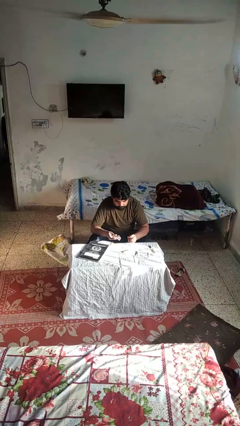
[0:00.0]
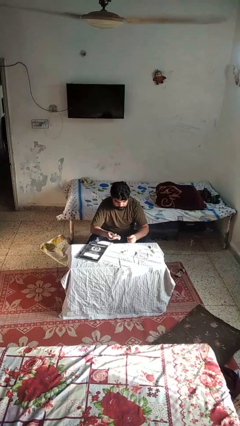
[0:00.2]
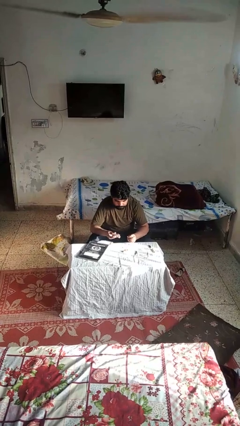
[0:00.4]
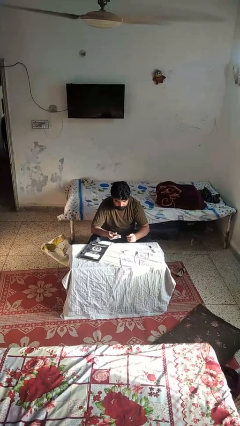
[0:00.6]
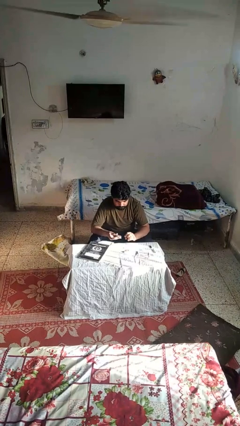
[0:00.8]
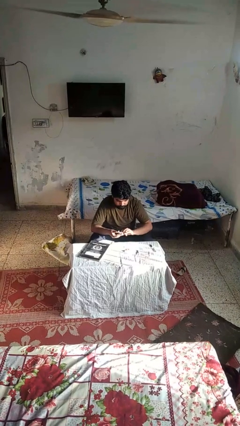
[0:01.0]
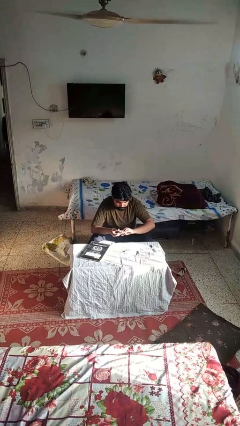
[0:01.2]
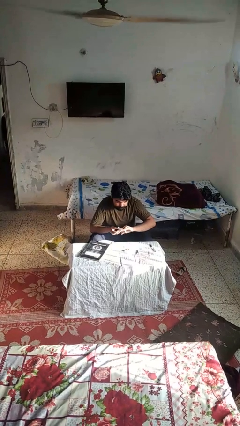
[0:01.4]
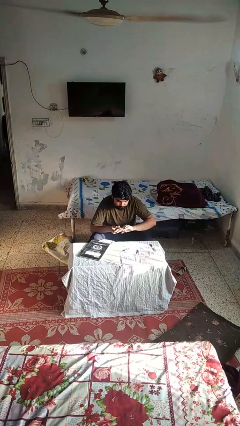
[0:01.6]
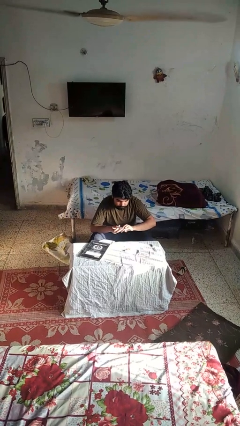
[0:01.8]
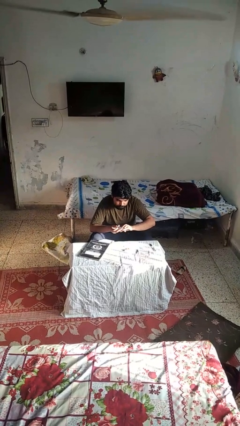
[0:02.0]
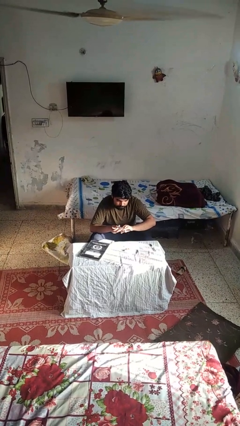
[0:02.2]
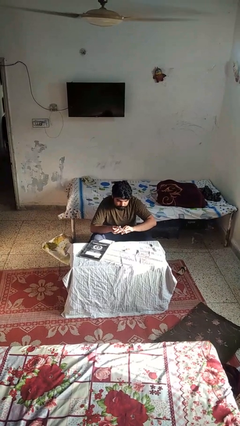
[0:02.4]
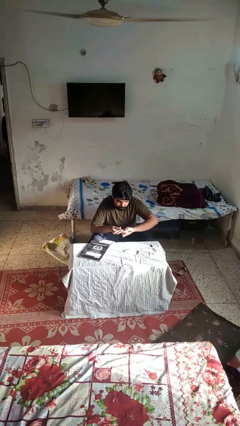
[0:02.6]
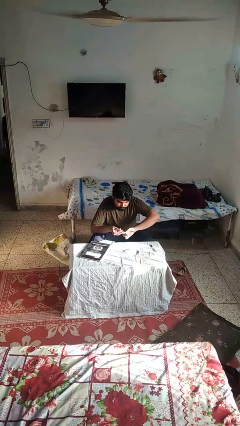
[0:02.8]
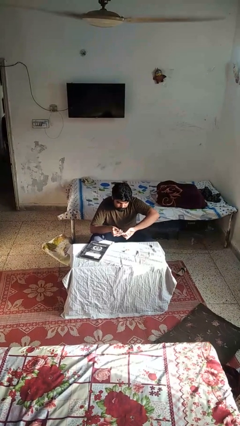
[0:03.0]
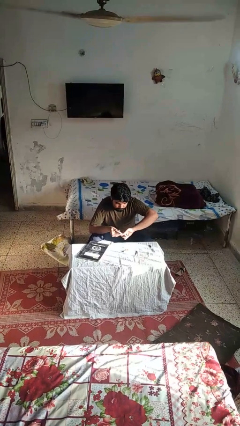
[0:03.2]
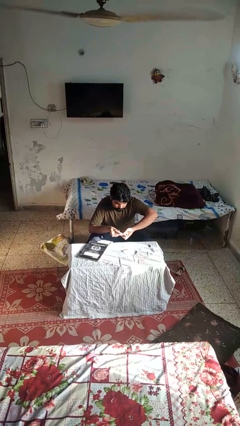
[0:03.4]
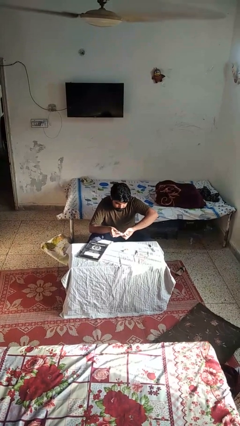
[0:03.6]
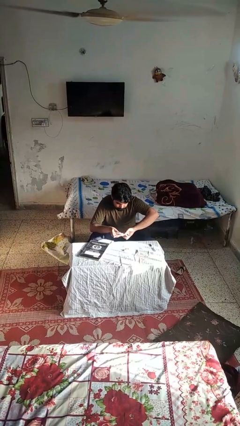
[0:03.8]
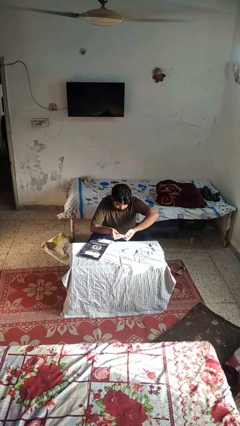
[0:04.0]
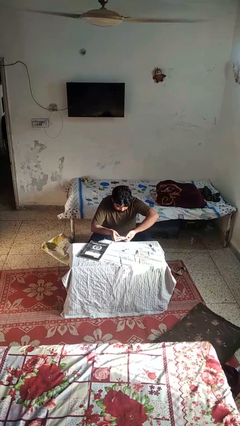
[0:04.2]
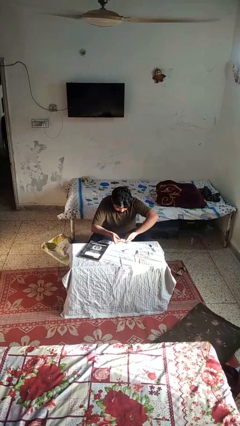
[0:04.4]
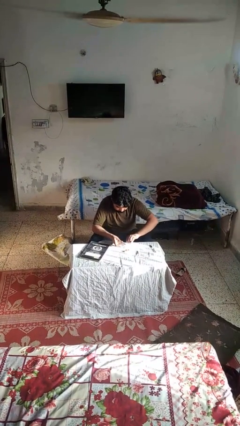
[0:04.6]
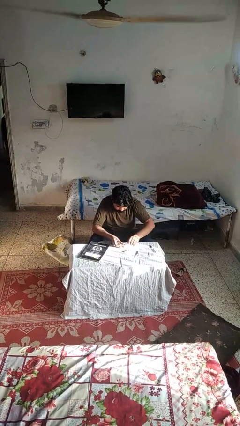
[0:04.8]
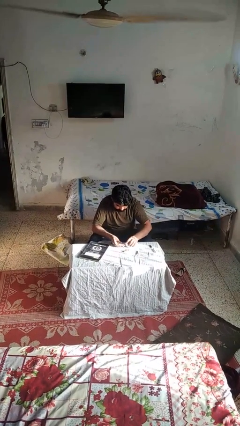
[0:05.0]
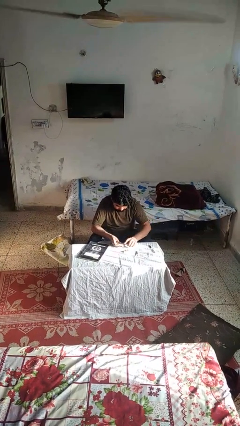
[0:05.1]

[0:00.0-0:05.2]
person clips fingernails

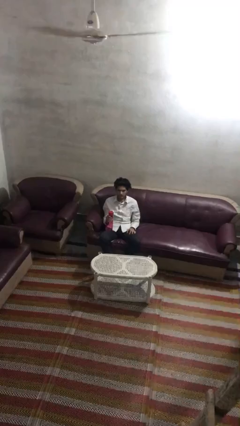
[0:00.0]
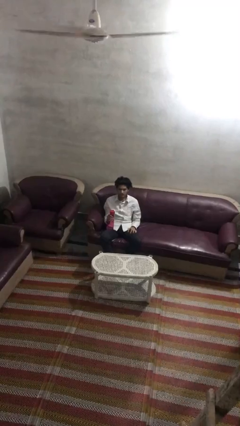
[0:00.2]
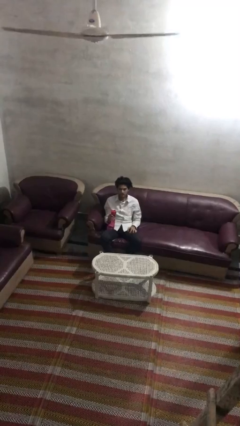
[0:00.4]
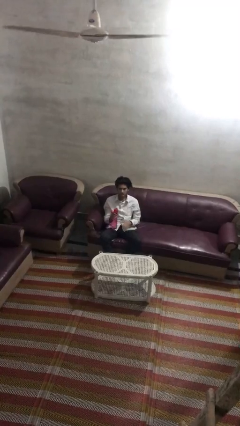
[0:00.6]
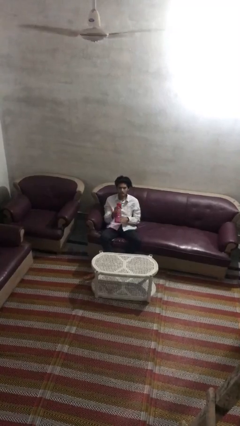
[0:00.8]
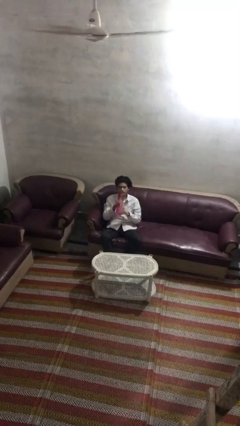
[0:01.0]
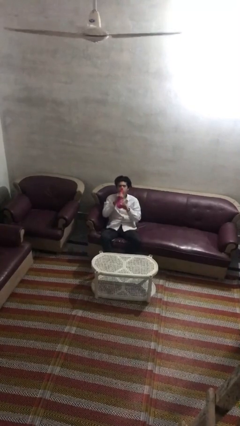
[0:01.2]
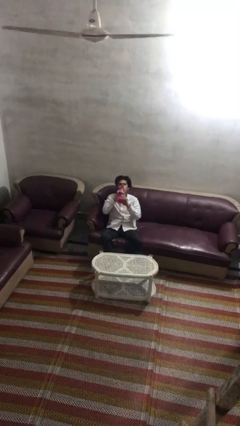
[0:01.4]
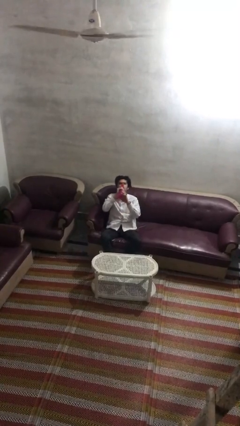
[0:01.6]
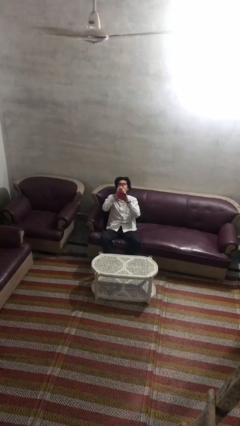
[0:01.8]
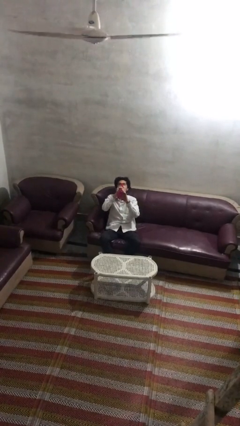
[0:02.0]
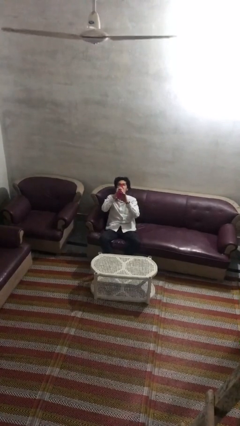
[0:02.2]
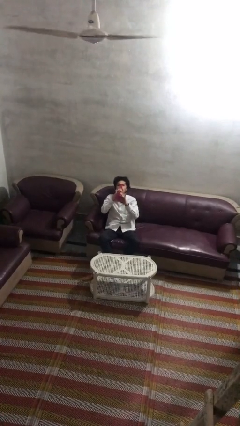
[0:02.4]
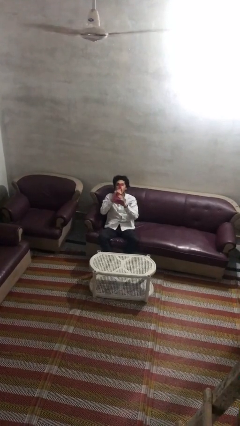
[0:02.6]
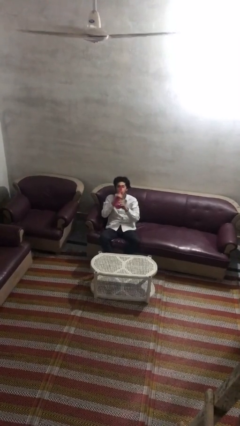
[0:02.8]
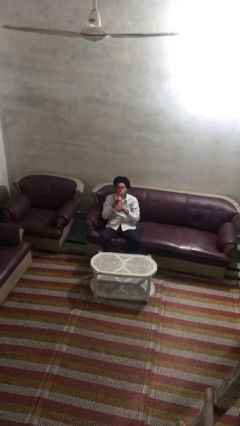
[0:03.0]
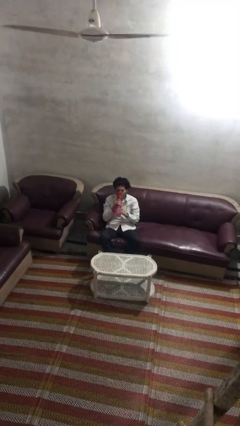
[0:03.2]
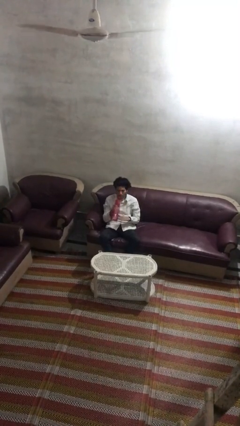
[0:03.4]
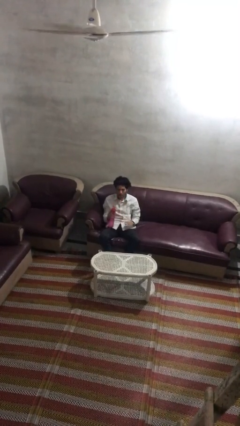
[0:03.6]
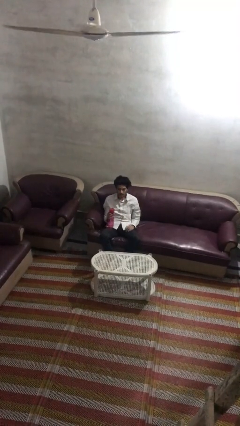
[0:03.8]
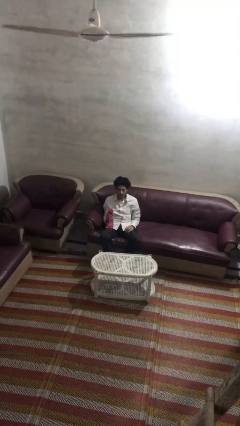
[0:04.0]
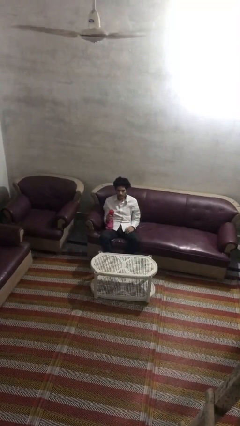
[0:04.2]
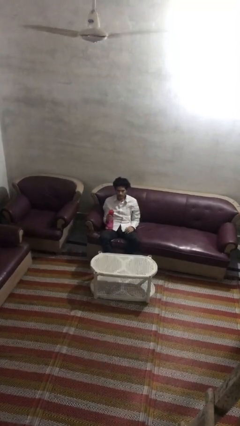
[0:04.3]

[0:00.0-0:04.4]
person drinks from bottle

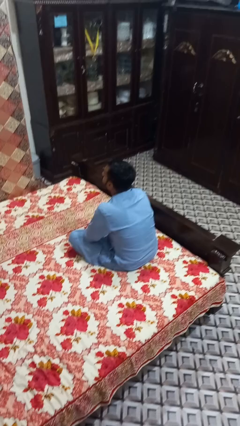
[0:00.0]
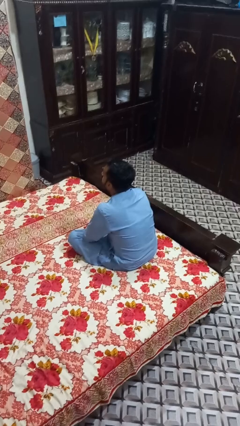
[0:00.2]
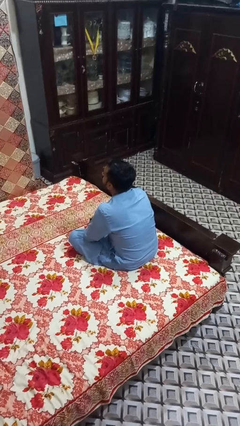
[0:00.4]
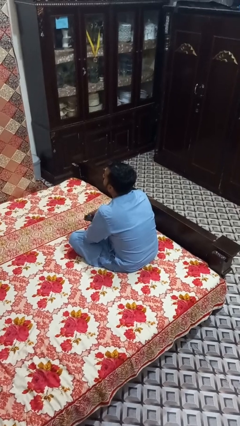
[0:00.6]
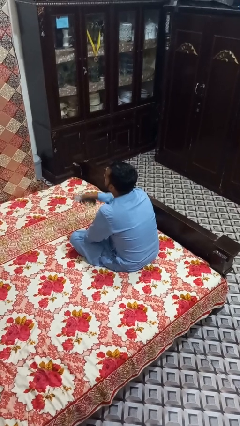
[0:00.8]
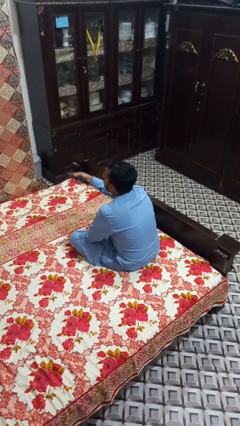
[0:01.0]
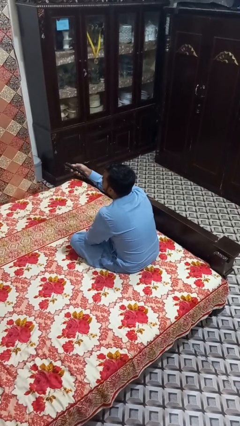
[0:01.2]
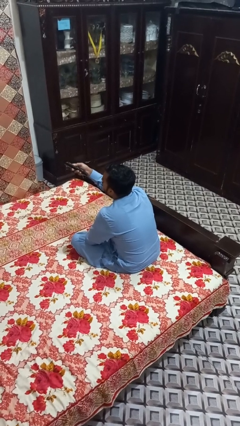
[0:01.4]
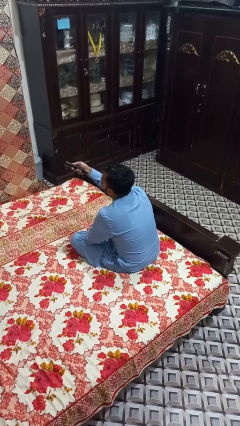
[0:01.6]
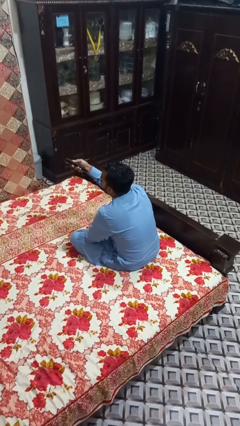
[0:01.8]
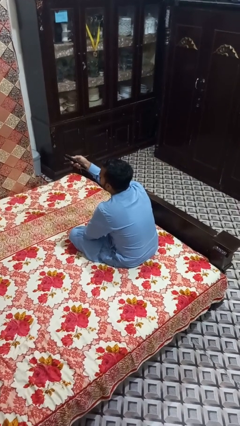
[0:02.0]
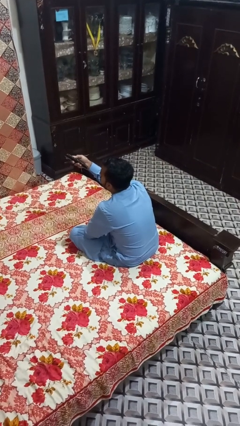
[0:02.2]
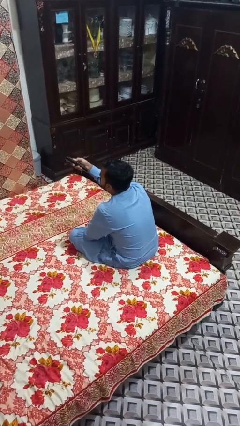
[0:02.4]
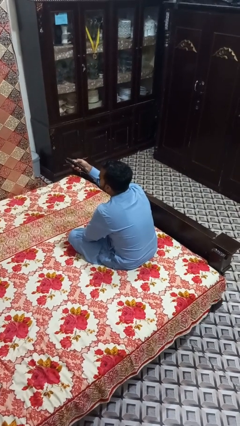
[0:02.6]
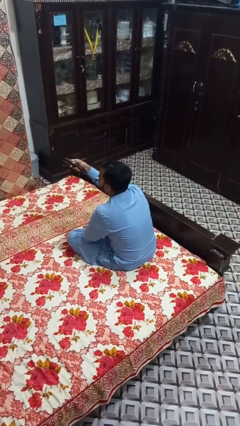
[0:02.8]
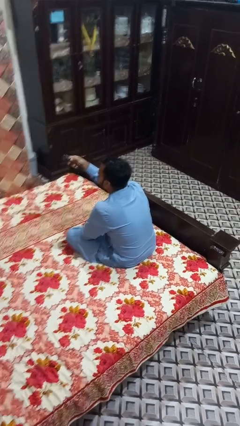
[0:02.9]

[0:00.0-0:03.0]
person uses television remote

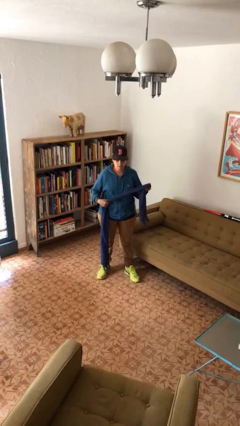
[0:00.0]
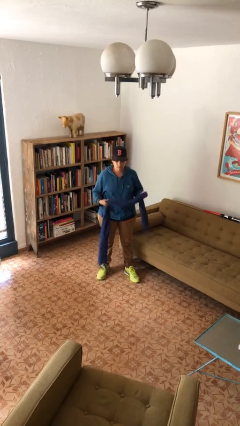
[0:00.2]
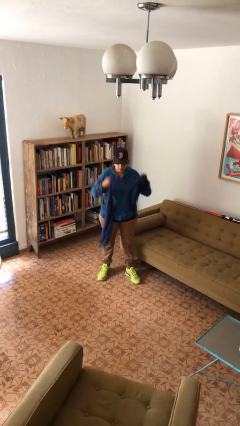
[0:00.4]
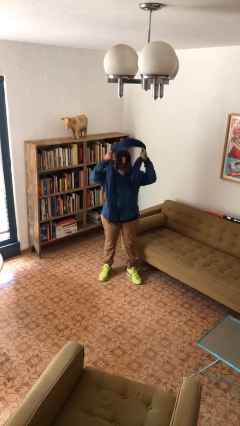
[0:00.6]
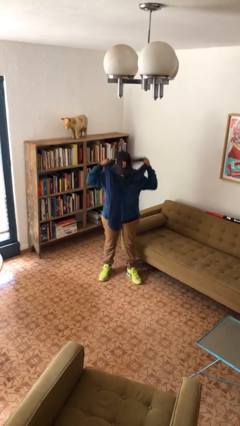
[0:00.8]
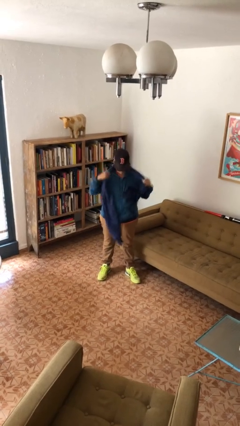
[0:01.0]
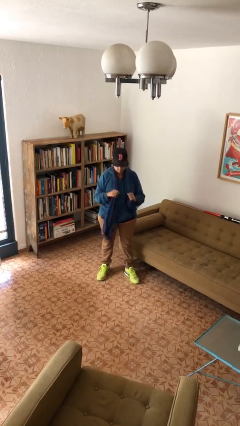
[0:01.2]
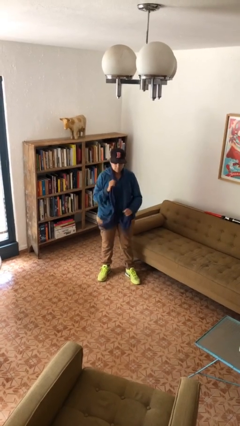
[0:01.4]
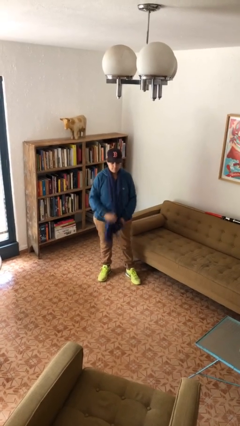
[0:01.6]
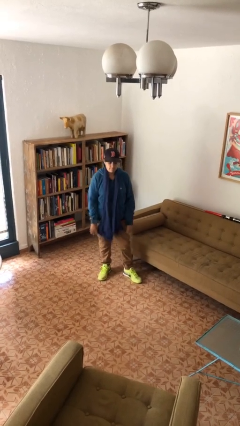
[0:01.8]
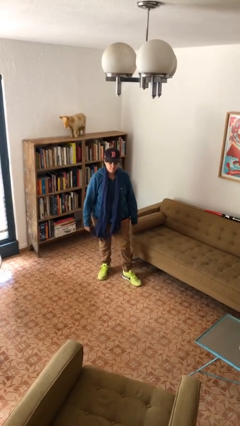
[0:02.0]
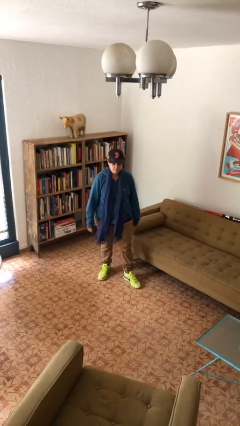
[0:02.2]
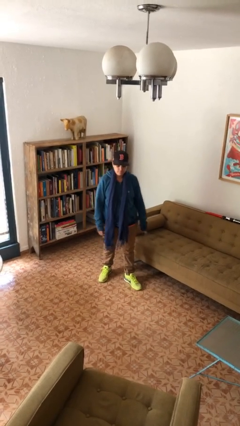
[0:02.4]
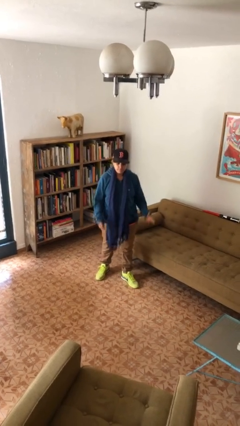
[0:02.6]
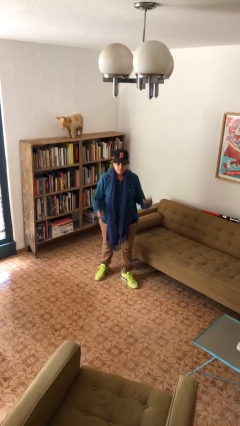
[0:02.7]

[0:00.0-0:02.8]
person puts on scarf

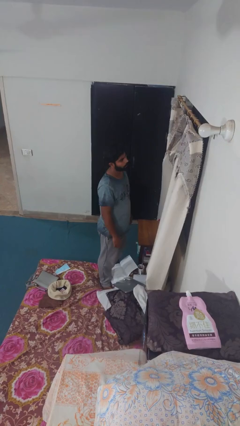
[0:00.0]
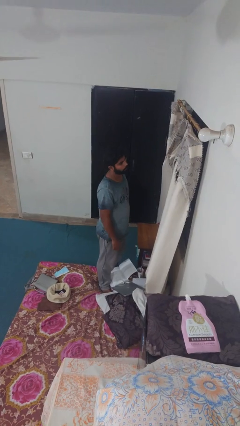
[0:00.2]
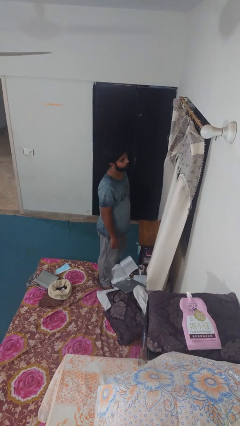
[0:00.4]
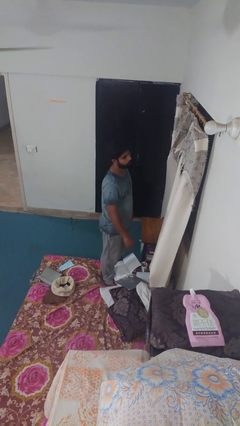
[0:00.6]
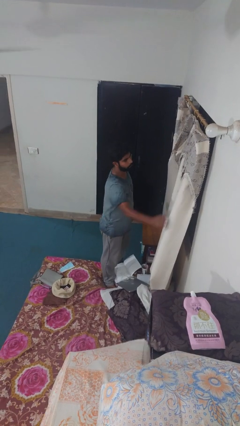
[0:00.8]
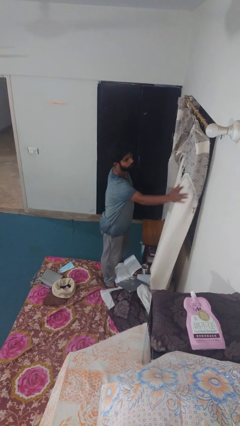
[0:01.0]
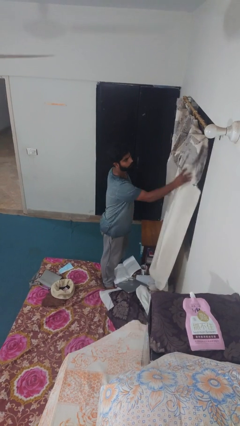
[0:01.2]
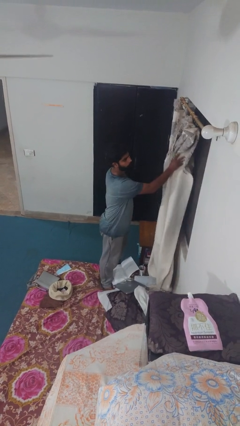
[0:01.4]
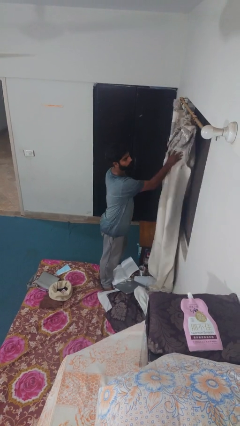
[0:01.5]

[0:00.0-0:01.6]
person opens curtains

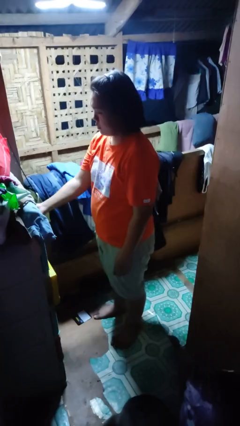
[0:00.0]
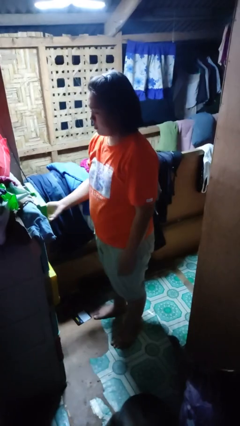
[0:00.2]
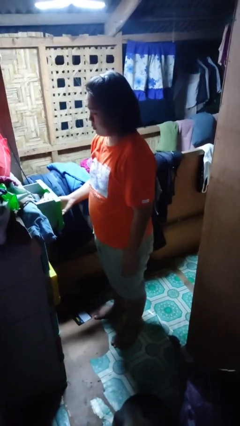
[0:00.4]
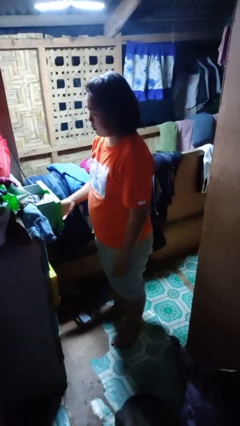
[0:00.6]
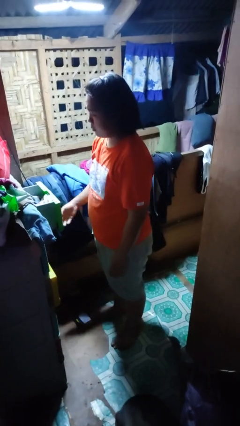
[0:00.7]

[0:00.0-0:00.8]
person opens dresser drawer
